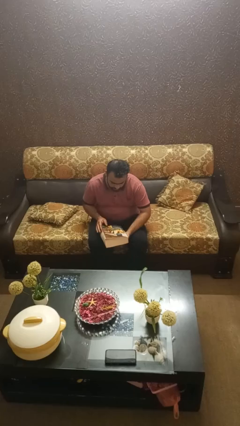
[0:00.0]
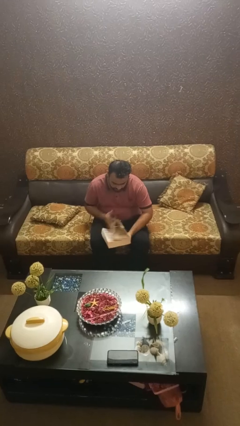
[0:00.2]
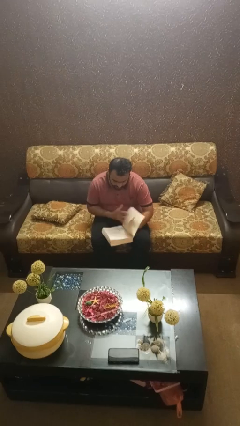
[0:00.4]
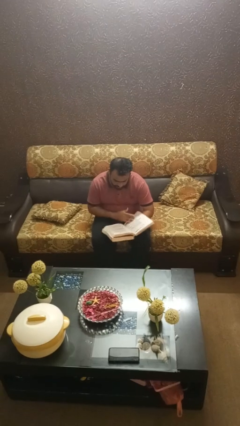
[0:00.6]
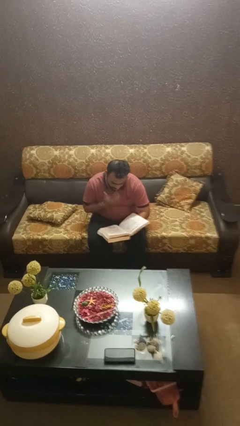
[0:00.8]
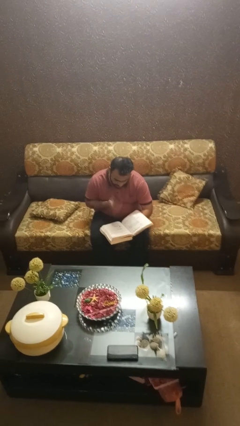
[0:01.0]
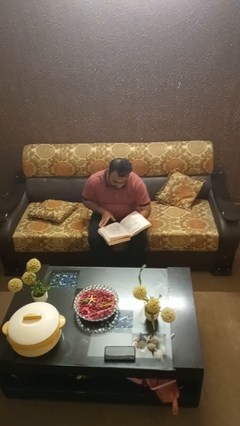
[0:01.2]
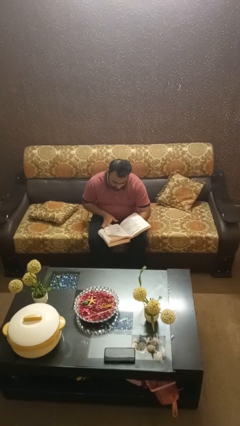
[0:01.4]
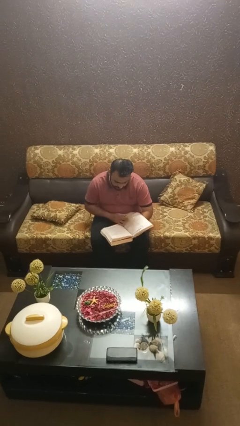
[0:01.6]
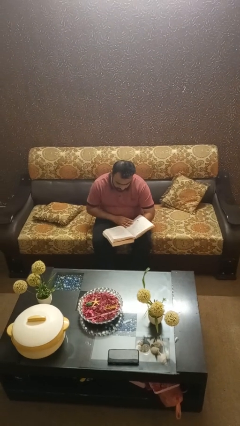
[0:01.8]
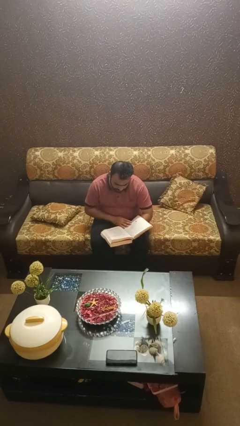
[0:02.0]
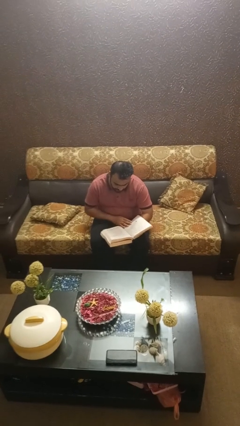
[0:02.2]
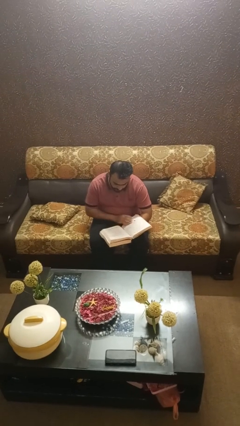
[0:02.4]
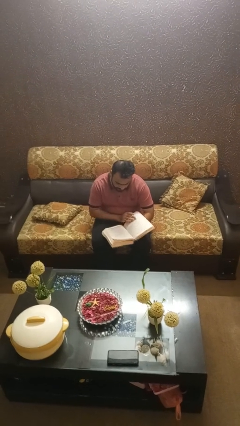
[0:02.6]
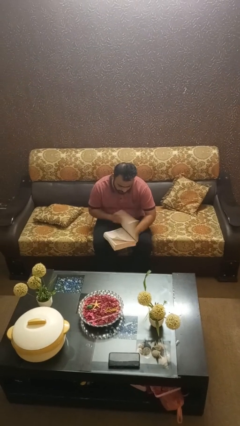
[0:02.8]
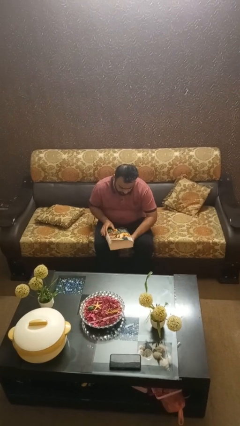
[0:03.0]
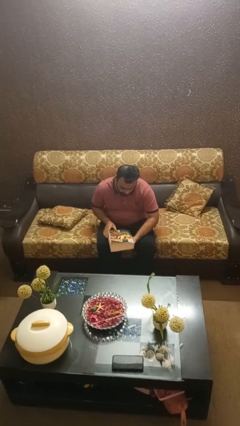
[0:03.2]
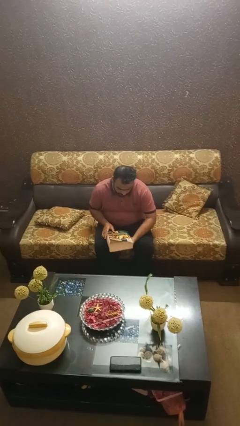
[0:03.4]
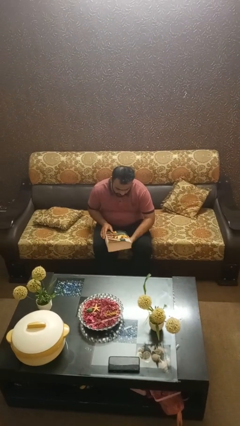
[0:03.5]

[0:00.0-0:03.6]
person reads book

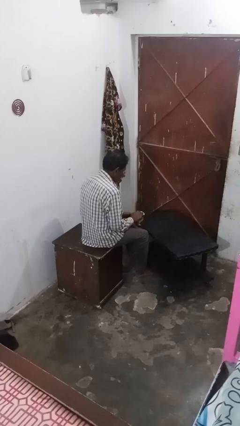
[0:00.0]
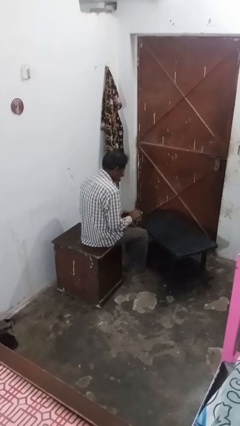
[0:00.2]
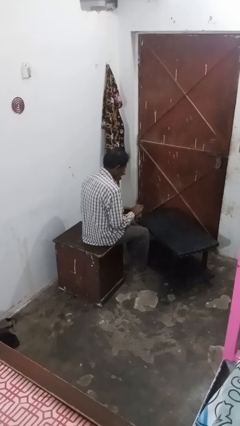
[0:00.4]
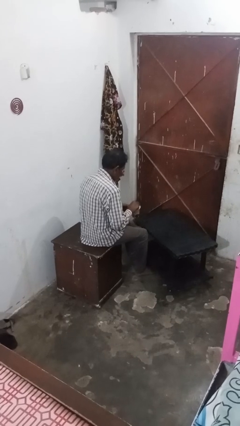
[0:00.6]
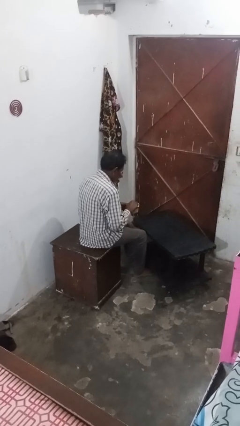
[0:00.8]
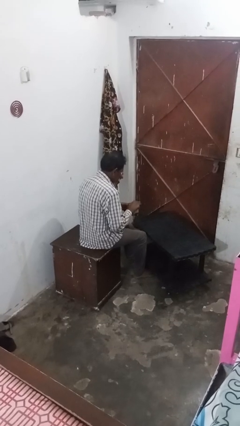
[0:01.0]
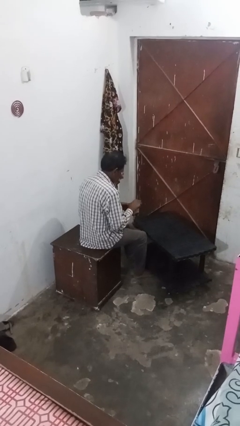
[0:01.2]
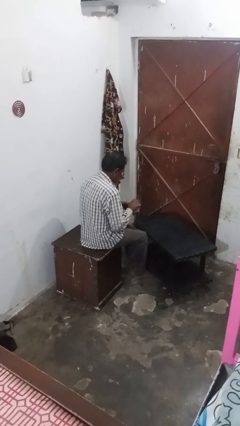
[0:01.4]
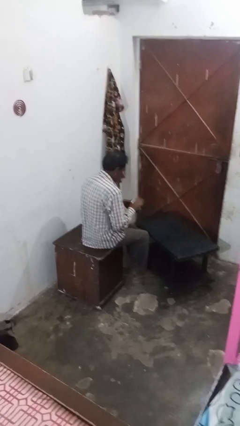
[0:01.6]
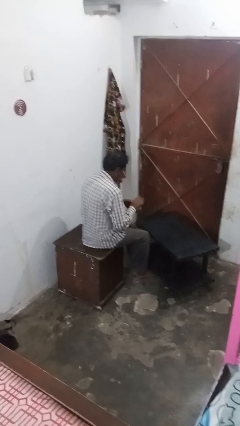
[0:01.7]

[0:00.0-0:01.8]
person stirs mug

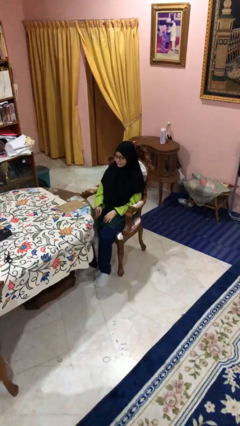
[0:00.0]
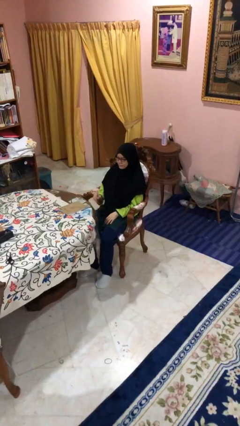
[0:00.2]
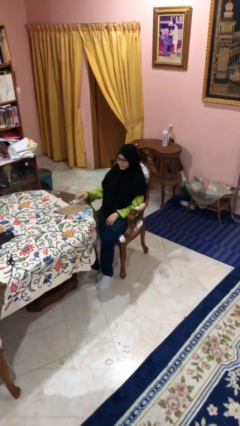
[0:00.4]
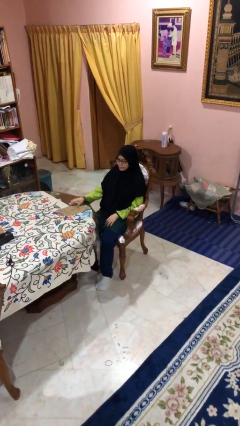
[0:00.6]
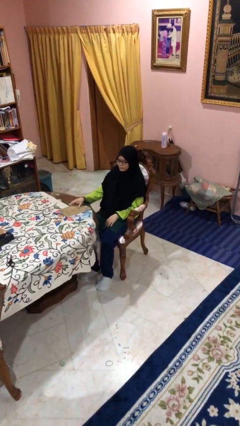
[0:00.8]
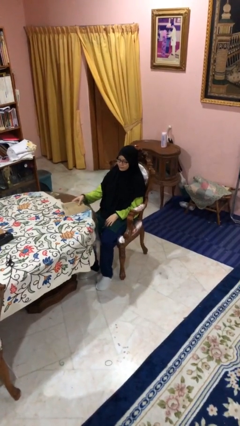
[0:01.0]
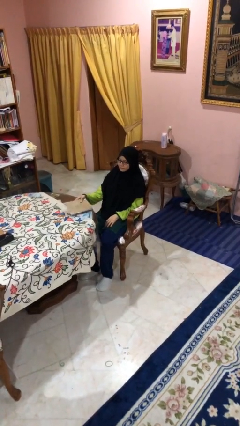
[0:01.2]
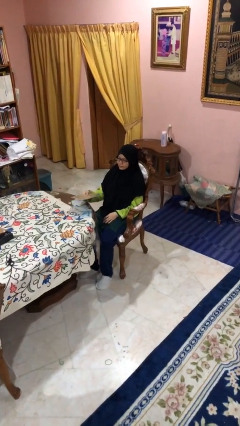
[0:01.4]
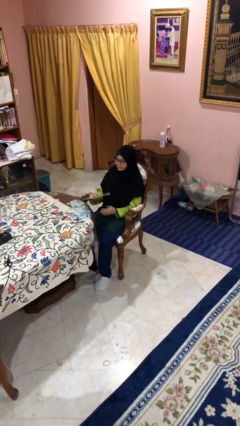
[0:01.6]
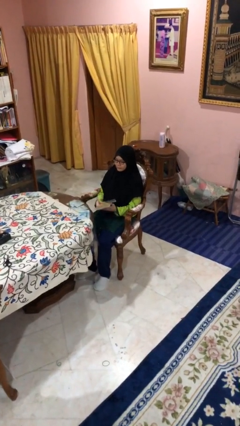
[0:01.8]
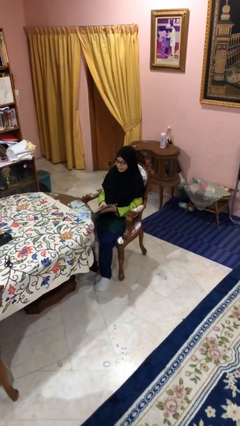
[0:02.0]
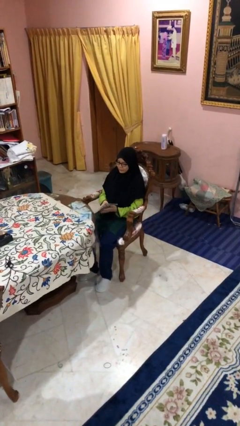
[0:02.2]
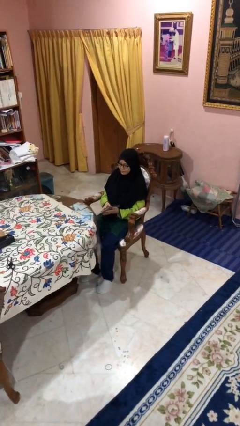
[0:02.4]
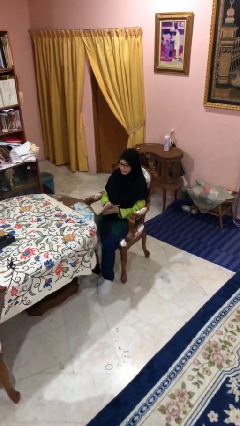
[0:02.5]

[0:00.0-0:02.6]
person picks up object from table

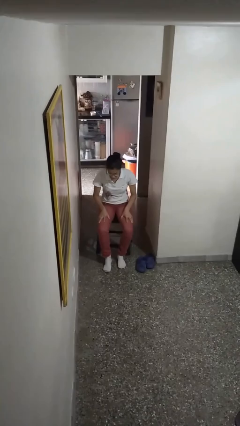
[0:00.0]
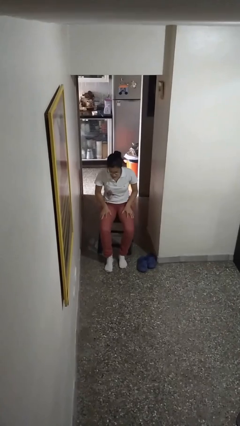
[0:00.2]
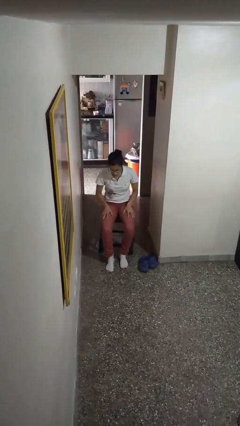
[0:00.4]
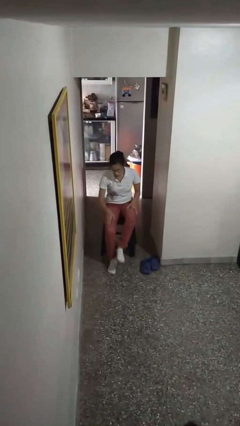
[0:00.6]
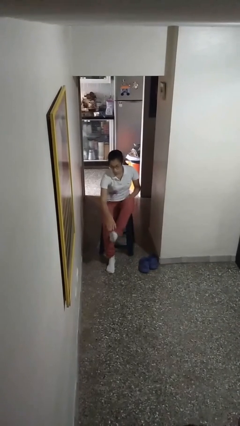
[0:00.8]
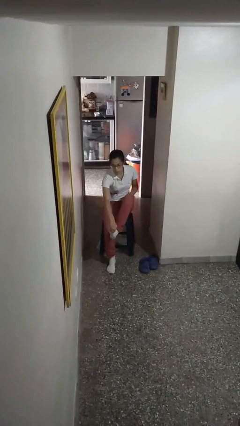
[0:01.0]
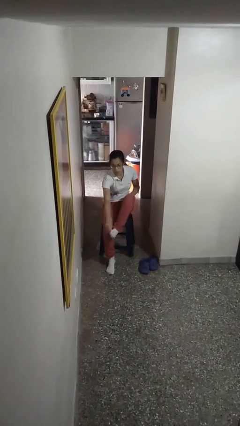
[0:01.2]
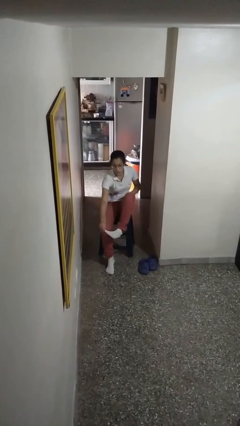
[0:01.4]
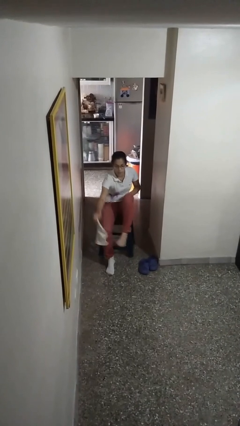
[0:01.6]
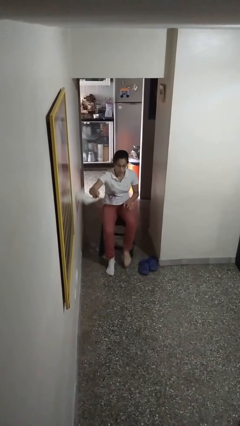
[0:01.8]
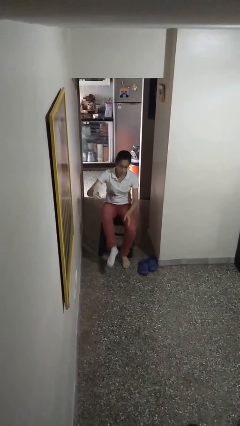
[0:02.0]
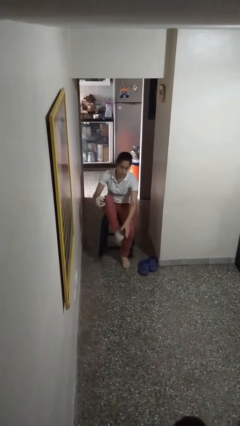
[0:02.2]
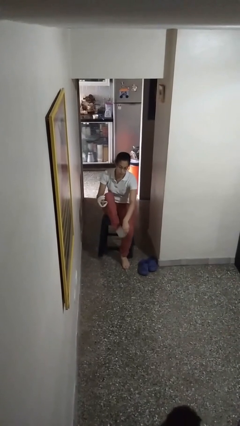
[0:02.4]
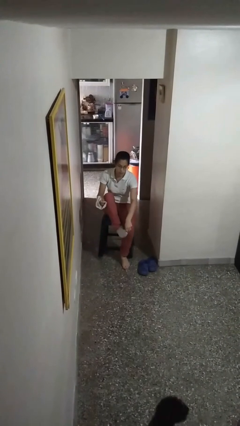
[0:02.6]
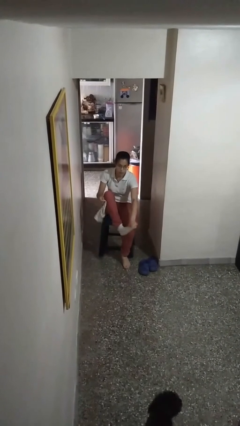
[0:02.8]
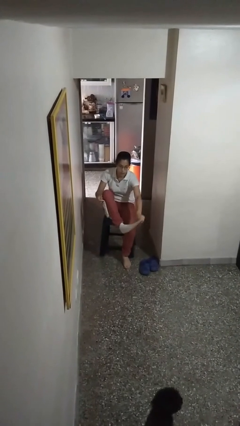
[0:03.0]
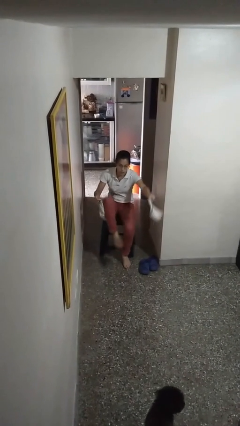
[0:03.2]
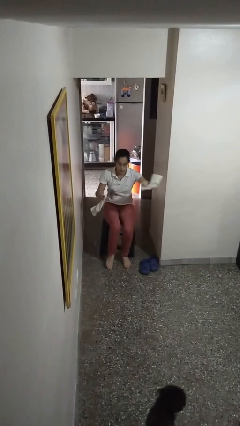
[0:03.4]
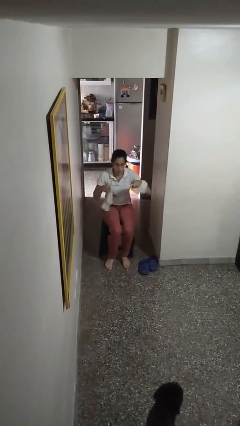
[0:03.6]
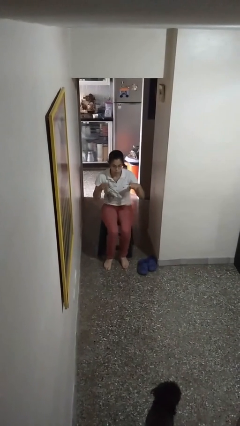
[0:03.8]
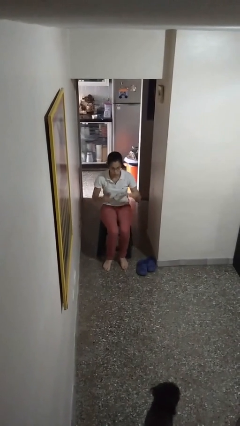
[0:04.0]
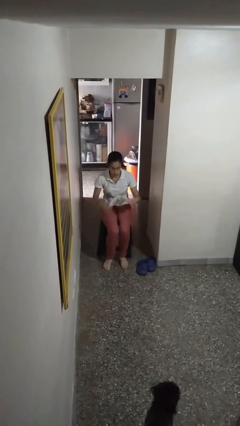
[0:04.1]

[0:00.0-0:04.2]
person takes off socks

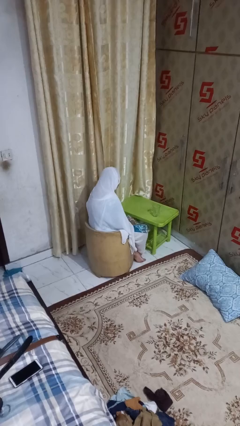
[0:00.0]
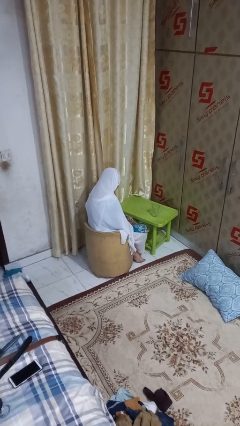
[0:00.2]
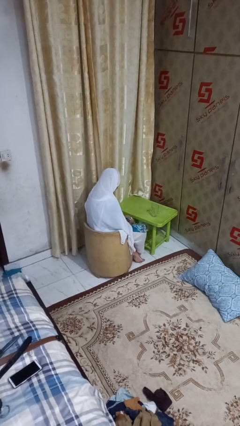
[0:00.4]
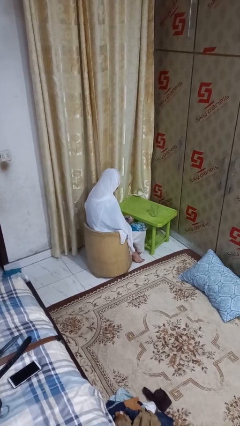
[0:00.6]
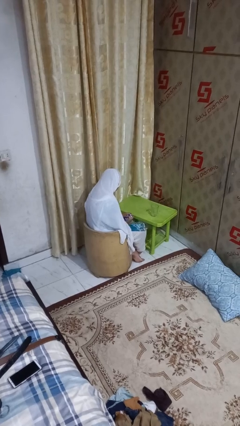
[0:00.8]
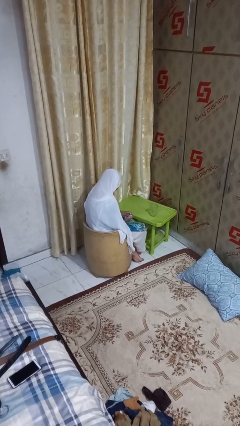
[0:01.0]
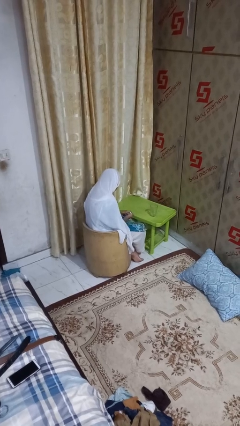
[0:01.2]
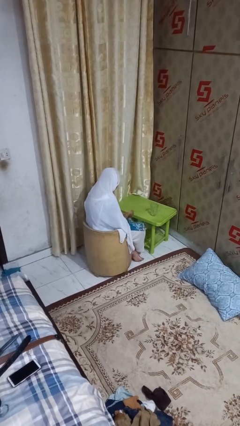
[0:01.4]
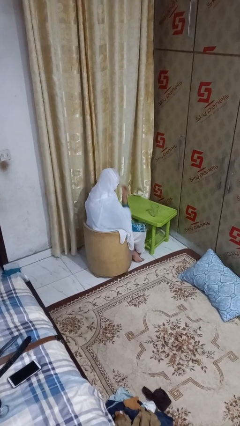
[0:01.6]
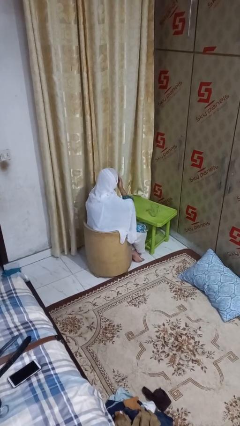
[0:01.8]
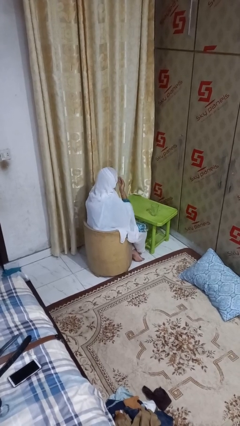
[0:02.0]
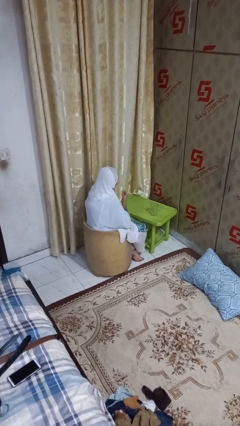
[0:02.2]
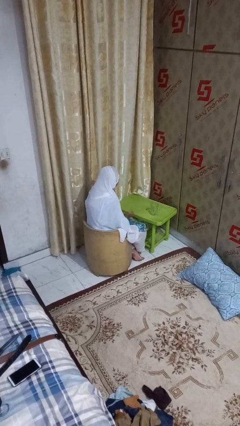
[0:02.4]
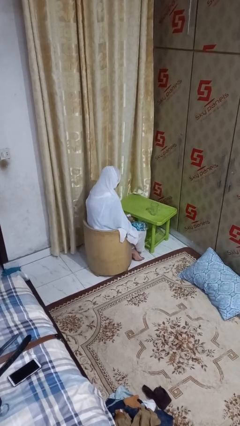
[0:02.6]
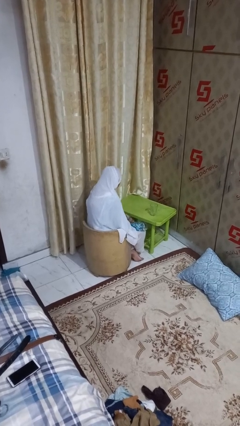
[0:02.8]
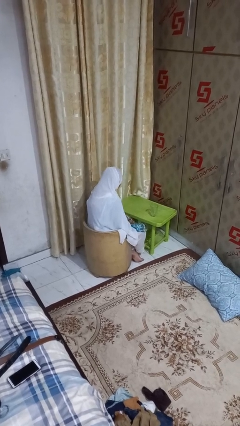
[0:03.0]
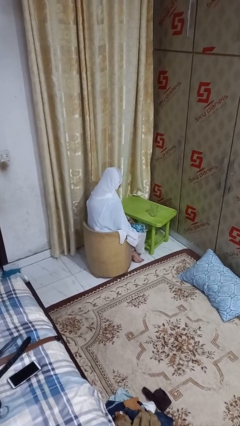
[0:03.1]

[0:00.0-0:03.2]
person takes medicine pills

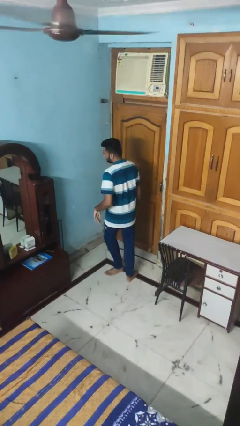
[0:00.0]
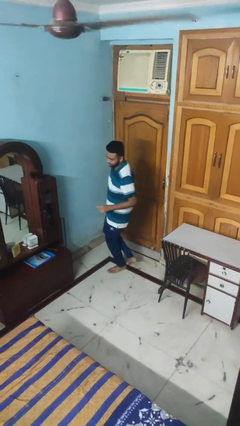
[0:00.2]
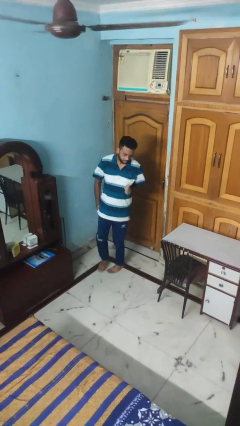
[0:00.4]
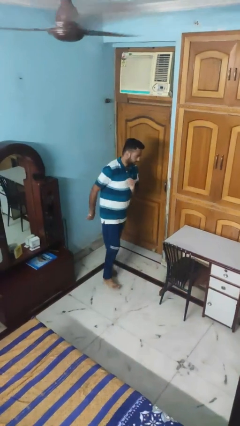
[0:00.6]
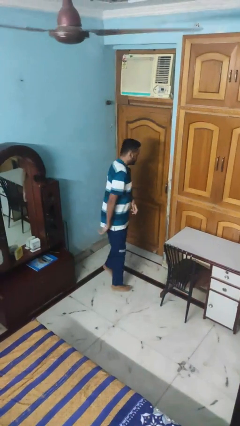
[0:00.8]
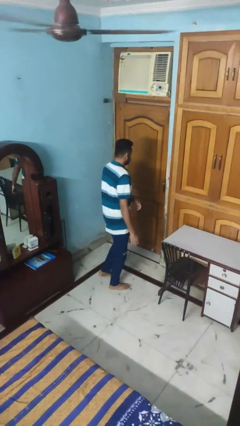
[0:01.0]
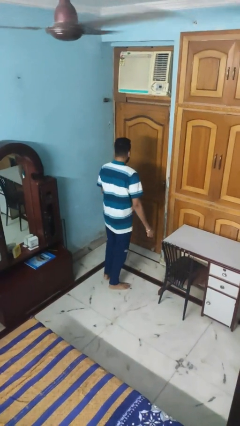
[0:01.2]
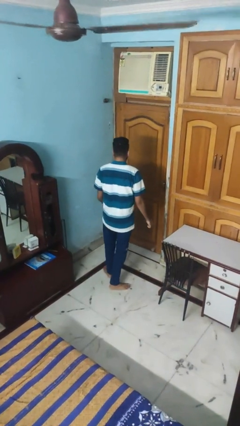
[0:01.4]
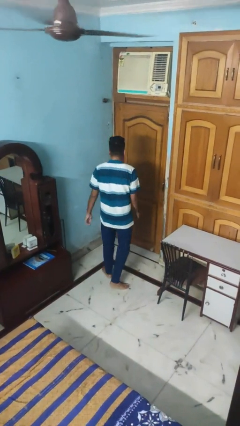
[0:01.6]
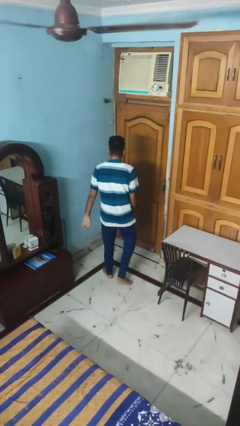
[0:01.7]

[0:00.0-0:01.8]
person twirls
